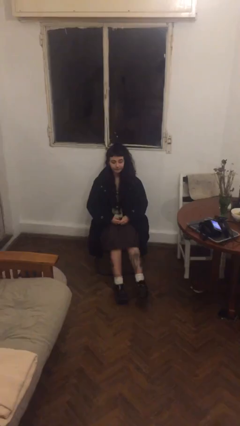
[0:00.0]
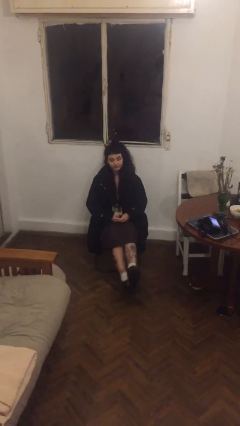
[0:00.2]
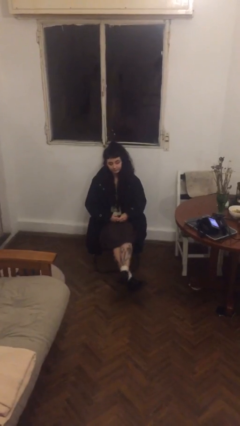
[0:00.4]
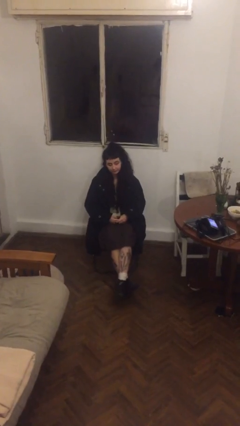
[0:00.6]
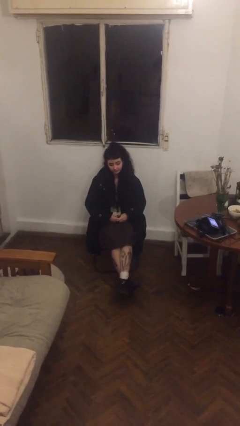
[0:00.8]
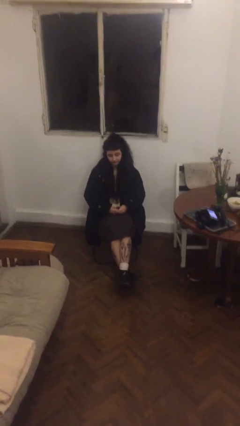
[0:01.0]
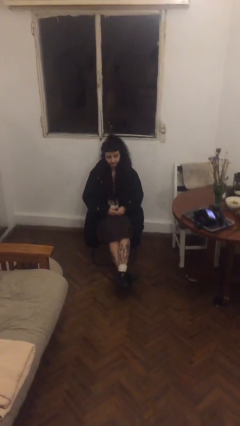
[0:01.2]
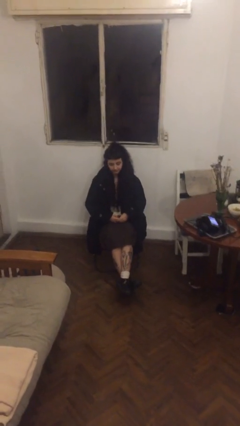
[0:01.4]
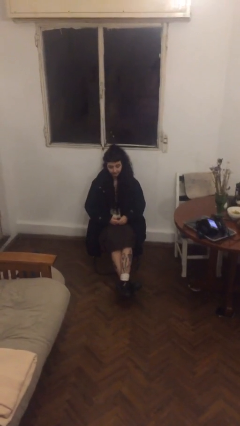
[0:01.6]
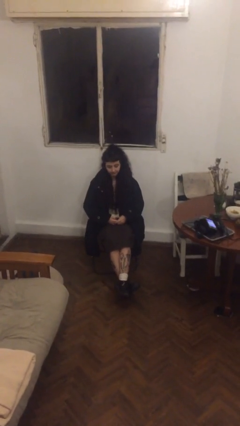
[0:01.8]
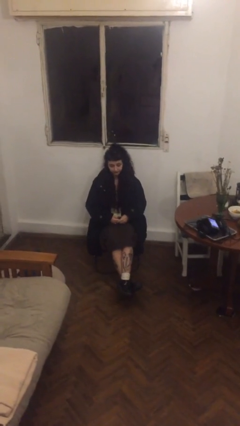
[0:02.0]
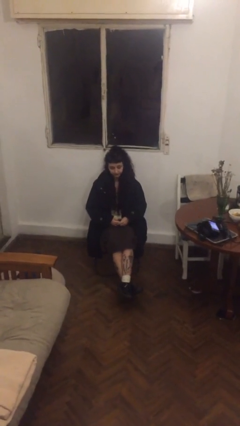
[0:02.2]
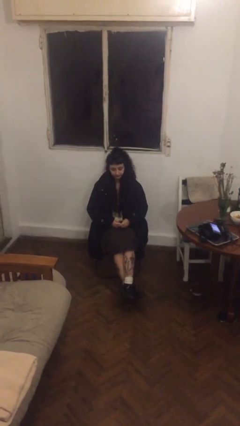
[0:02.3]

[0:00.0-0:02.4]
person crosses legs

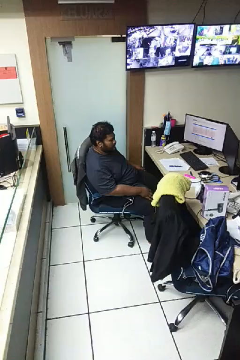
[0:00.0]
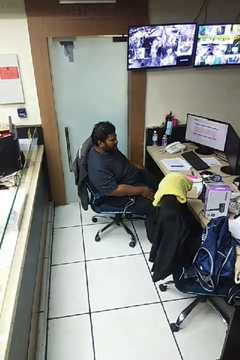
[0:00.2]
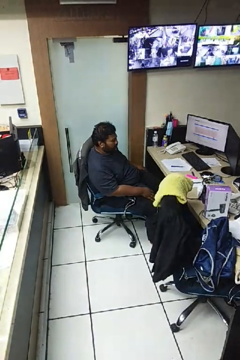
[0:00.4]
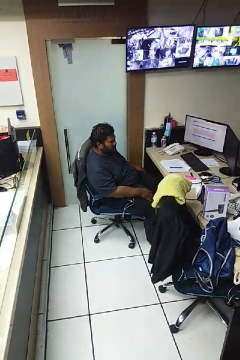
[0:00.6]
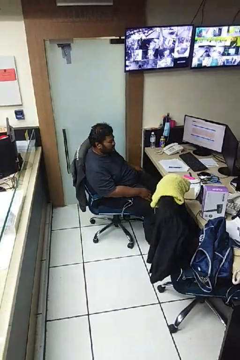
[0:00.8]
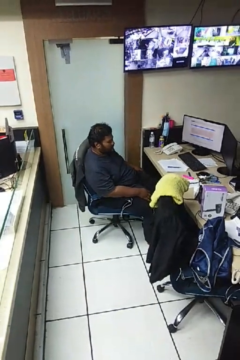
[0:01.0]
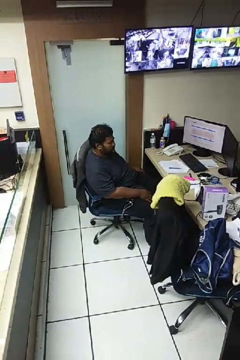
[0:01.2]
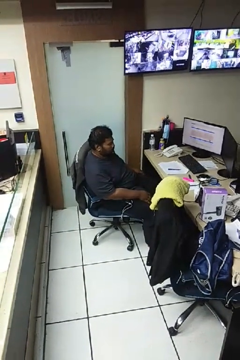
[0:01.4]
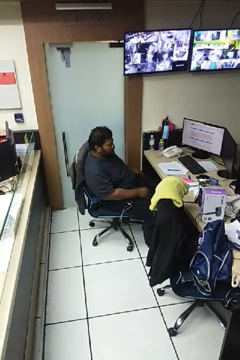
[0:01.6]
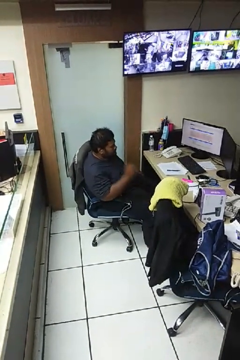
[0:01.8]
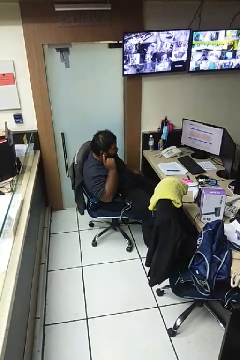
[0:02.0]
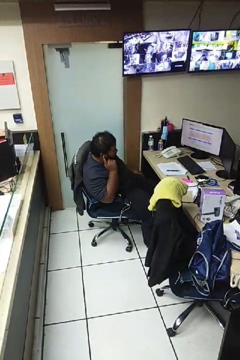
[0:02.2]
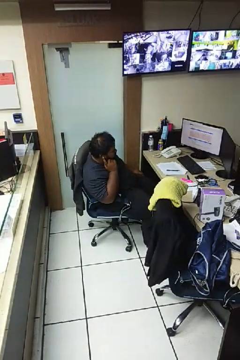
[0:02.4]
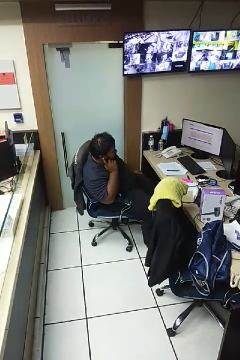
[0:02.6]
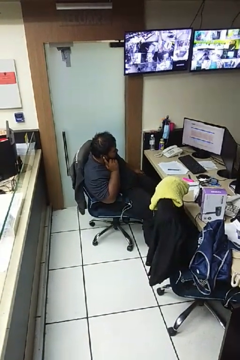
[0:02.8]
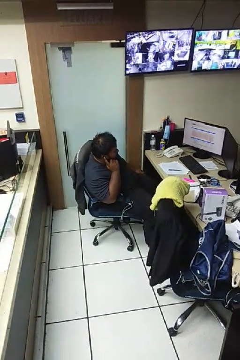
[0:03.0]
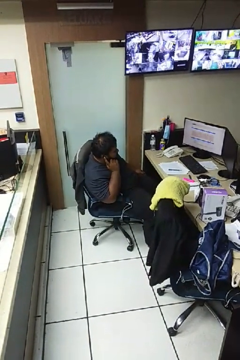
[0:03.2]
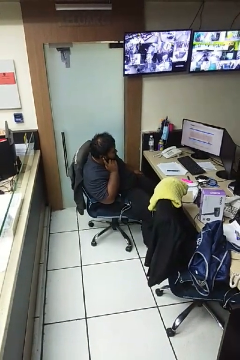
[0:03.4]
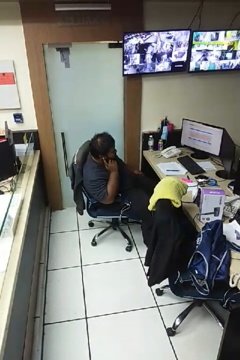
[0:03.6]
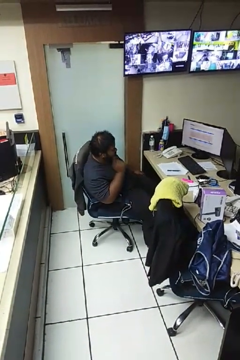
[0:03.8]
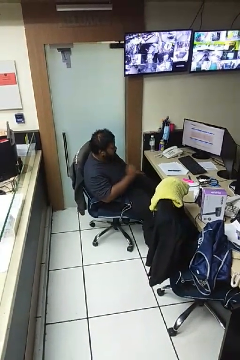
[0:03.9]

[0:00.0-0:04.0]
person gestures listen closely

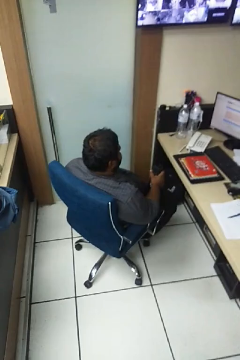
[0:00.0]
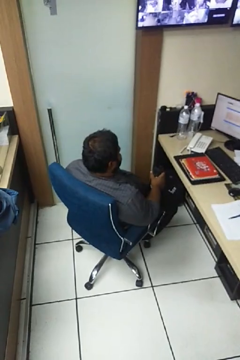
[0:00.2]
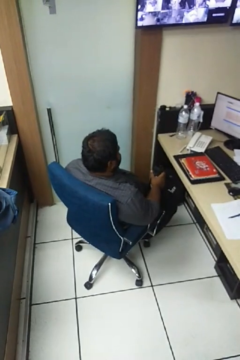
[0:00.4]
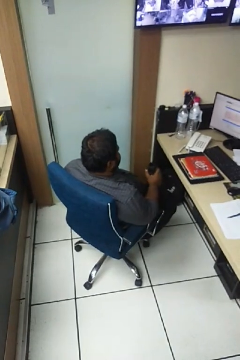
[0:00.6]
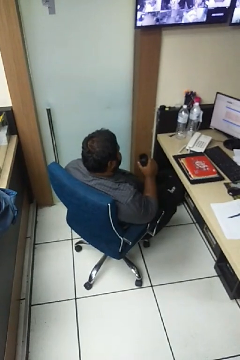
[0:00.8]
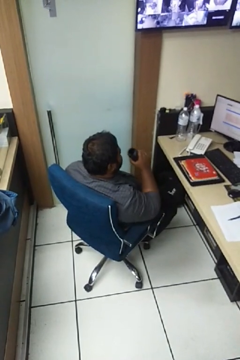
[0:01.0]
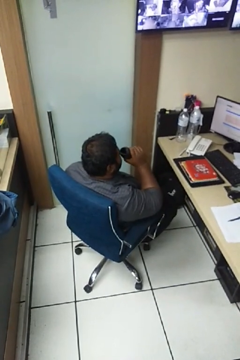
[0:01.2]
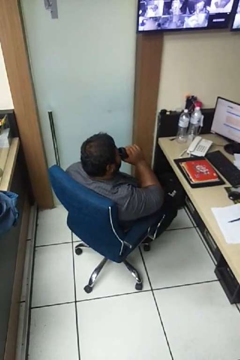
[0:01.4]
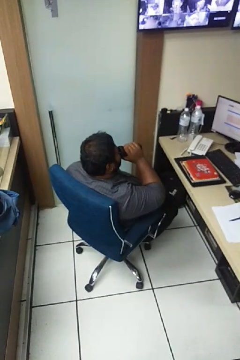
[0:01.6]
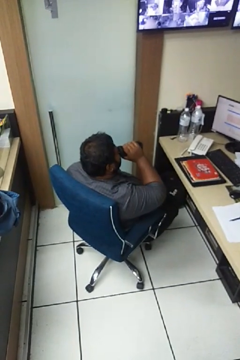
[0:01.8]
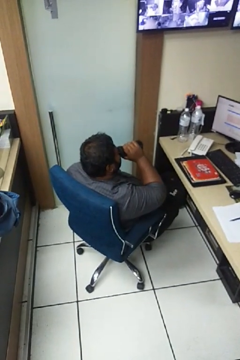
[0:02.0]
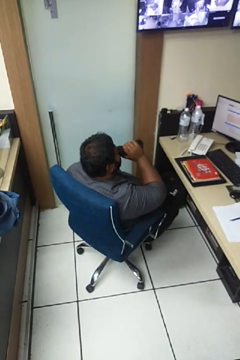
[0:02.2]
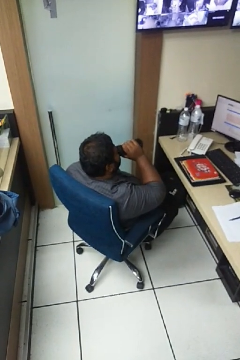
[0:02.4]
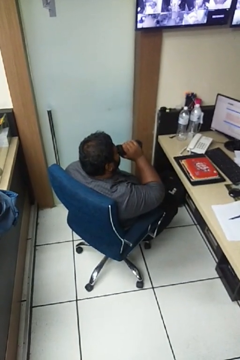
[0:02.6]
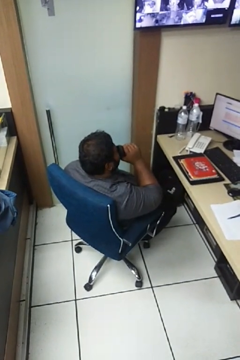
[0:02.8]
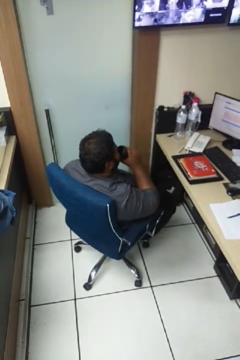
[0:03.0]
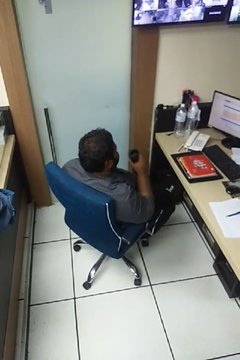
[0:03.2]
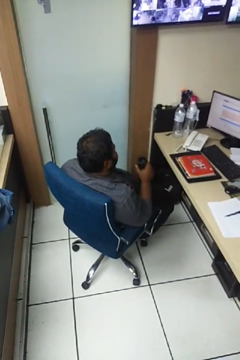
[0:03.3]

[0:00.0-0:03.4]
person drinks from bottle

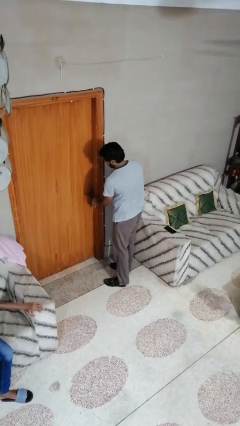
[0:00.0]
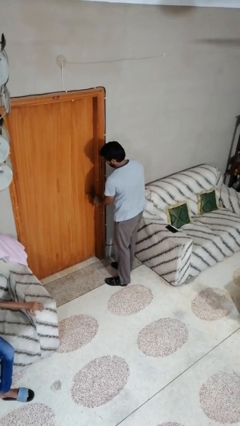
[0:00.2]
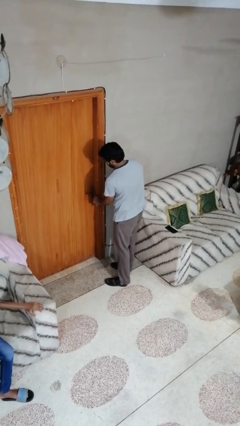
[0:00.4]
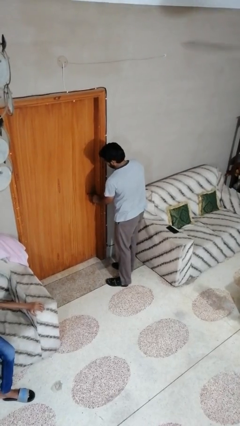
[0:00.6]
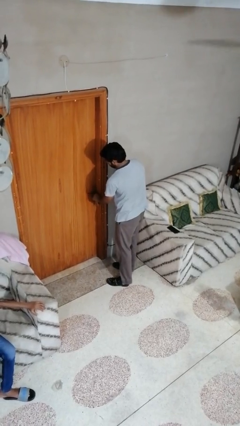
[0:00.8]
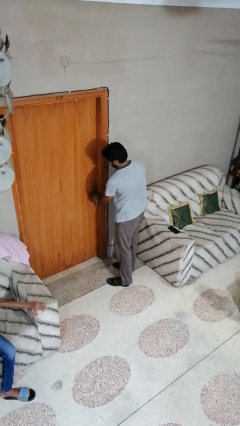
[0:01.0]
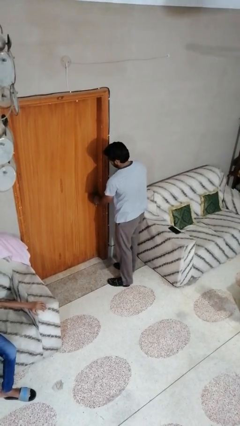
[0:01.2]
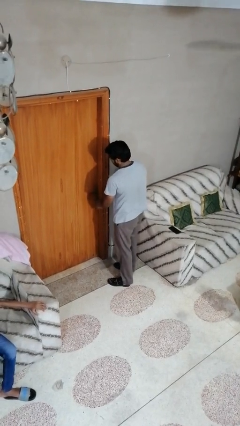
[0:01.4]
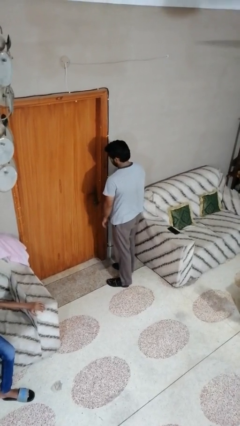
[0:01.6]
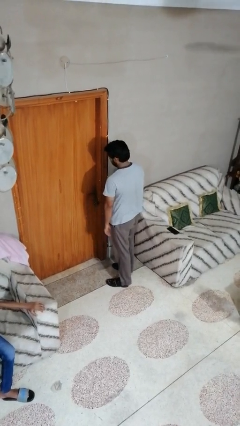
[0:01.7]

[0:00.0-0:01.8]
person unlocks door with keys

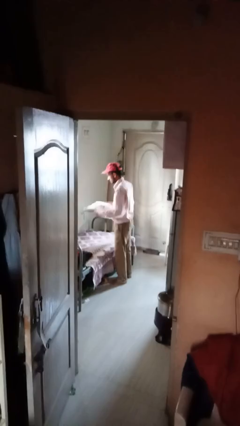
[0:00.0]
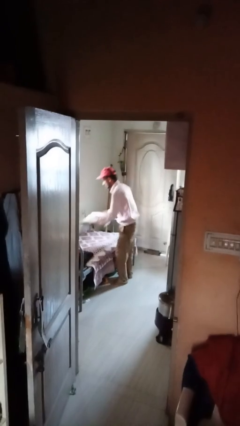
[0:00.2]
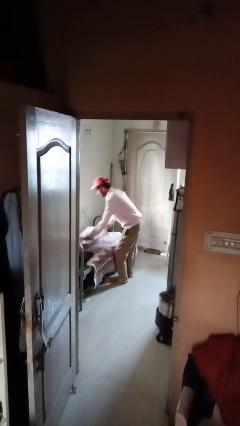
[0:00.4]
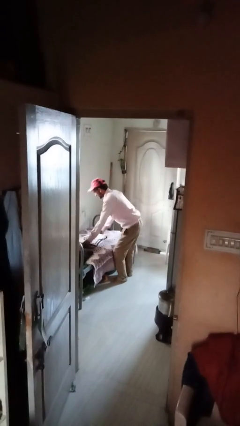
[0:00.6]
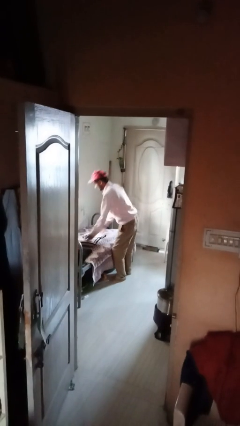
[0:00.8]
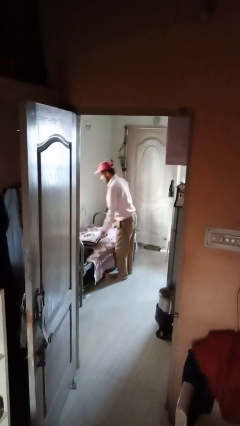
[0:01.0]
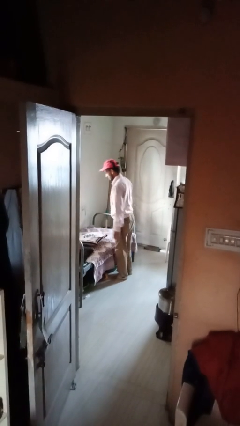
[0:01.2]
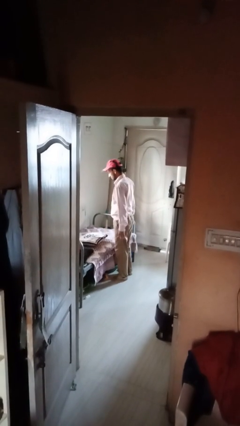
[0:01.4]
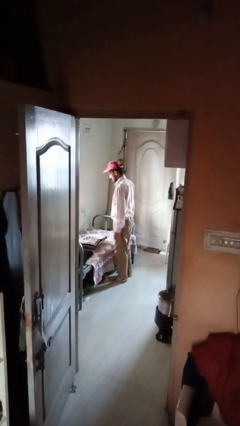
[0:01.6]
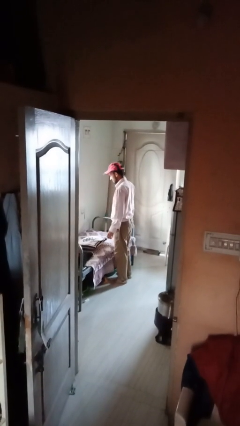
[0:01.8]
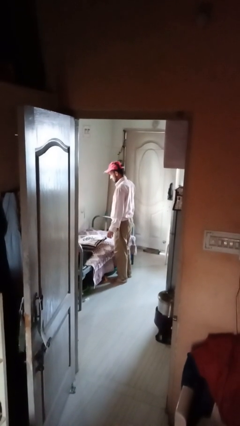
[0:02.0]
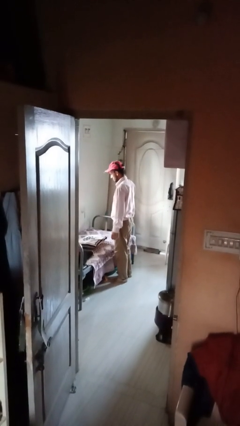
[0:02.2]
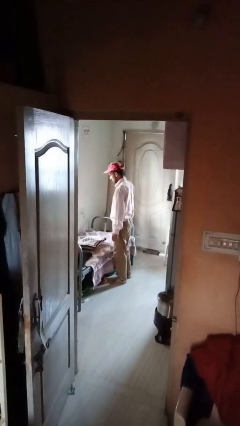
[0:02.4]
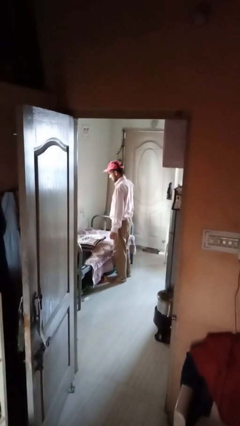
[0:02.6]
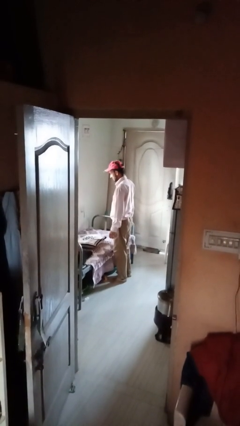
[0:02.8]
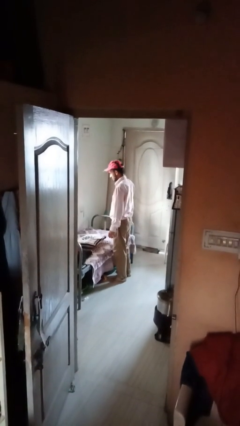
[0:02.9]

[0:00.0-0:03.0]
person puts down object on bed

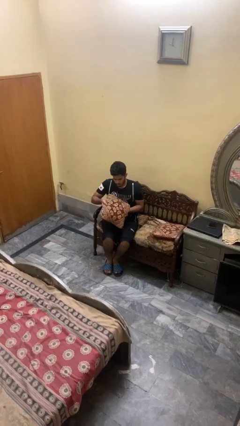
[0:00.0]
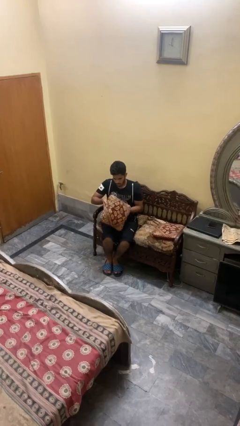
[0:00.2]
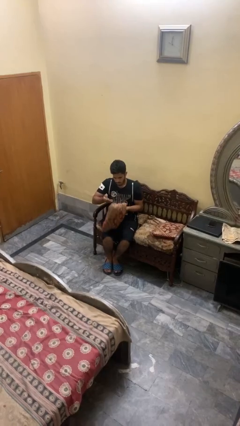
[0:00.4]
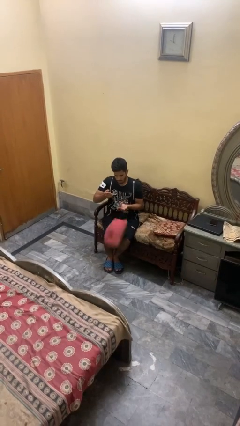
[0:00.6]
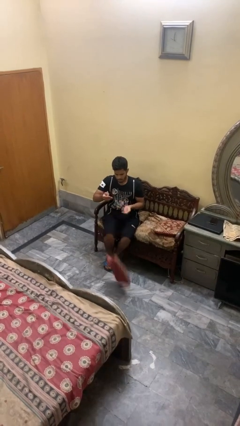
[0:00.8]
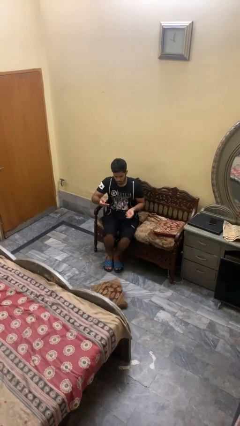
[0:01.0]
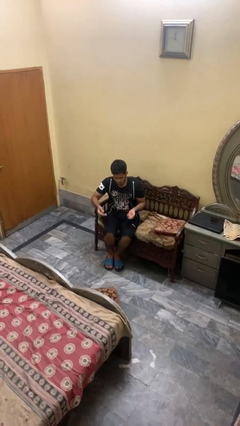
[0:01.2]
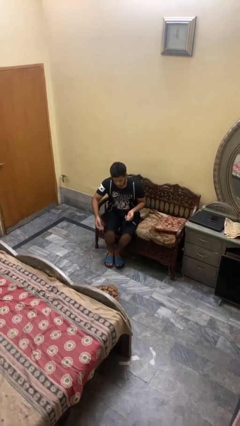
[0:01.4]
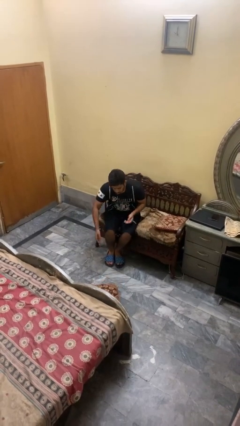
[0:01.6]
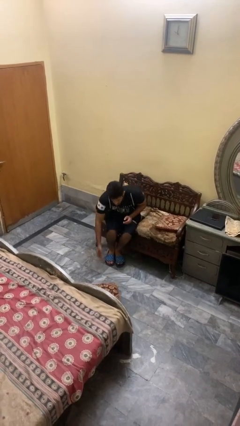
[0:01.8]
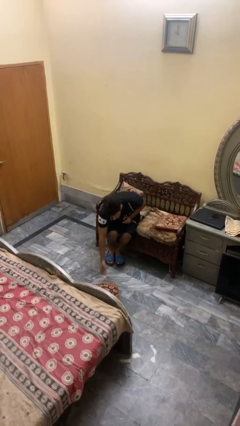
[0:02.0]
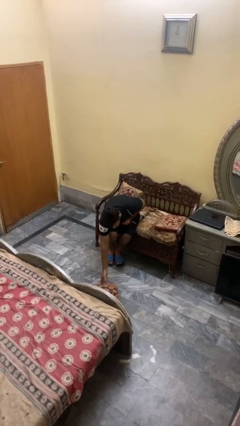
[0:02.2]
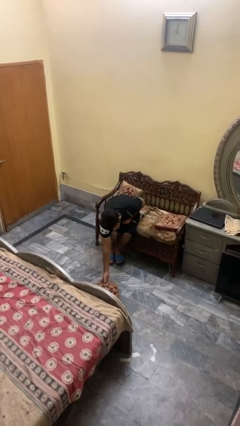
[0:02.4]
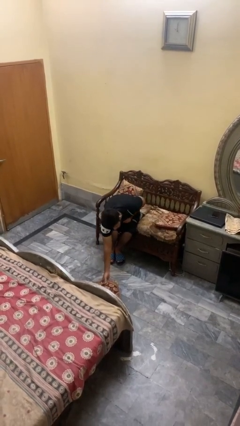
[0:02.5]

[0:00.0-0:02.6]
person drops object

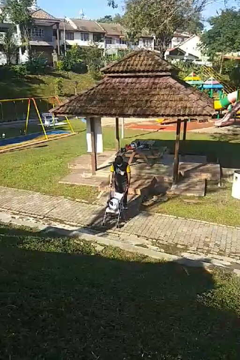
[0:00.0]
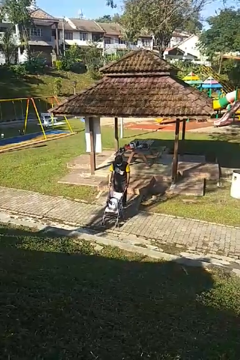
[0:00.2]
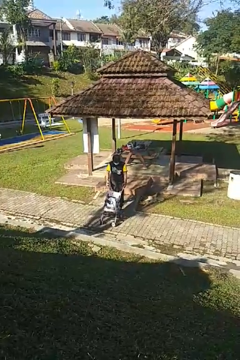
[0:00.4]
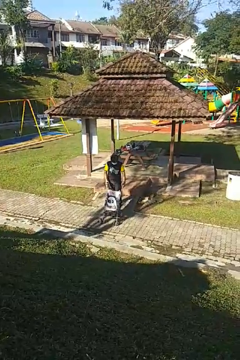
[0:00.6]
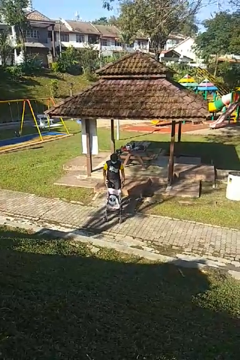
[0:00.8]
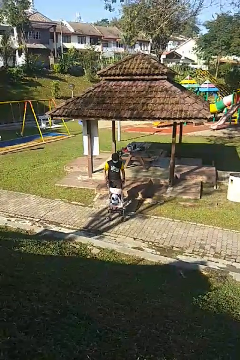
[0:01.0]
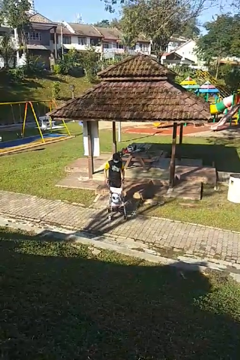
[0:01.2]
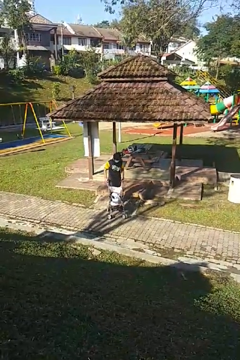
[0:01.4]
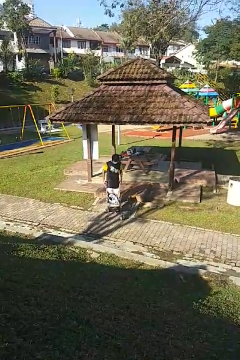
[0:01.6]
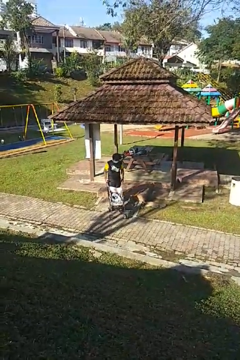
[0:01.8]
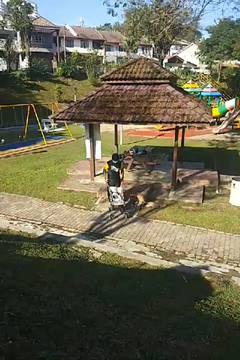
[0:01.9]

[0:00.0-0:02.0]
person pulls wheeled cart
